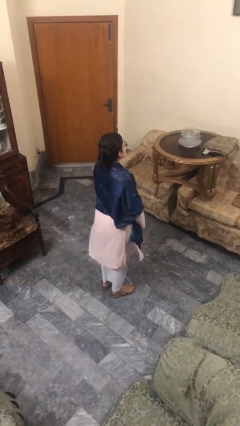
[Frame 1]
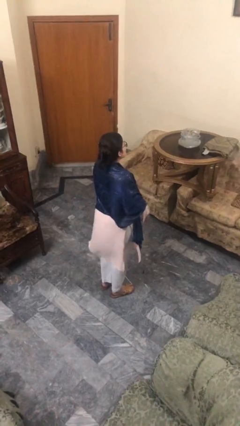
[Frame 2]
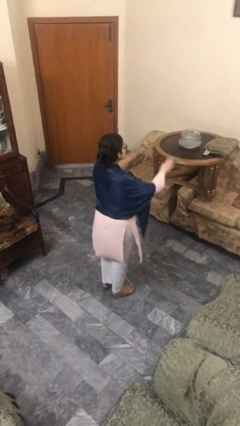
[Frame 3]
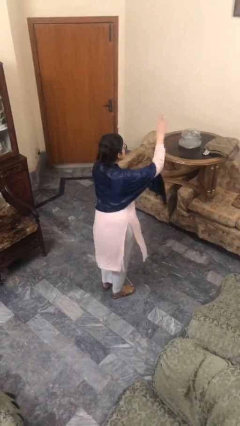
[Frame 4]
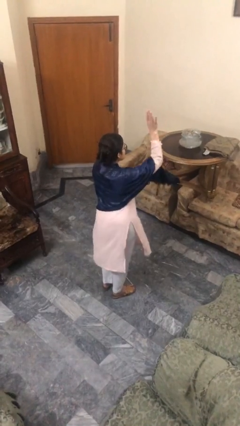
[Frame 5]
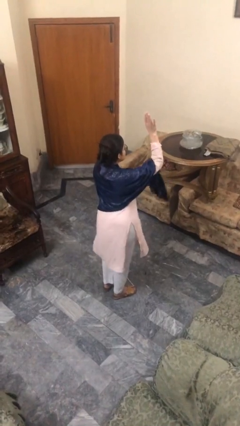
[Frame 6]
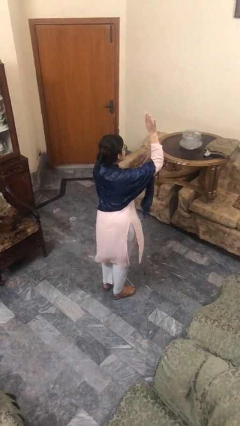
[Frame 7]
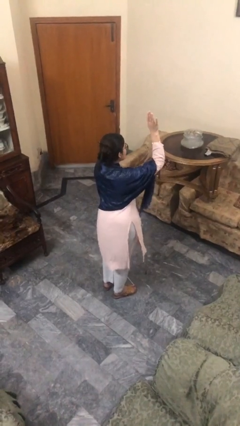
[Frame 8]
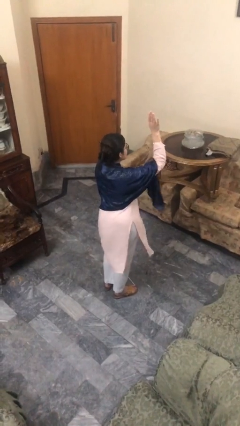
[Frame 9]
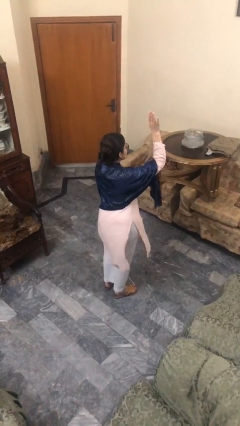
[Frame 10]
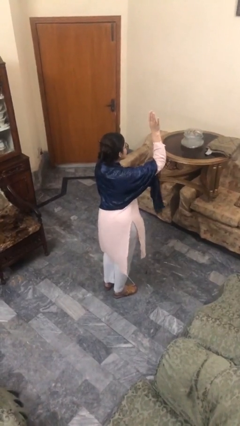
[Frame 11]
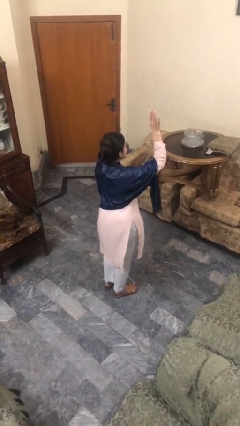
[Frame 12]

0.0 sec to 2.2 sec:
person gestures raise hand

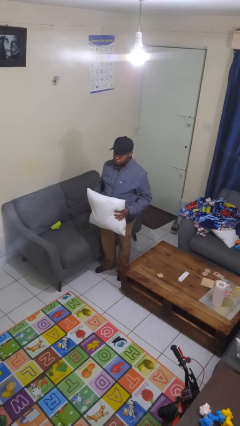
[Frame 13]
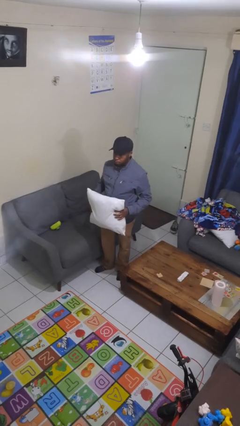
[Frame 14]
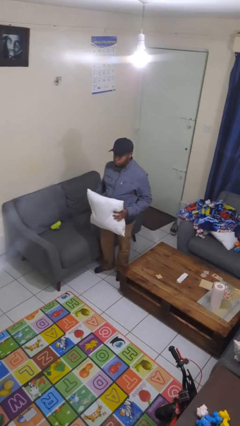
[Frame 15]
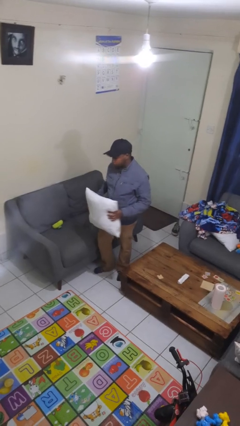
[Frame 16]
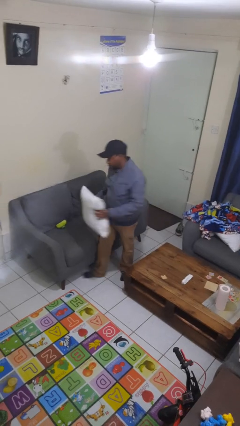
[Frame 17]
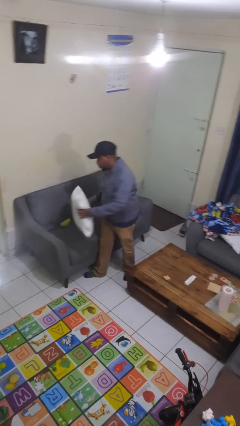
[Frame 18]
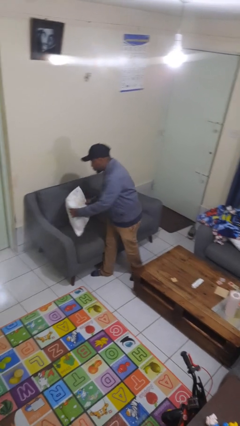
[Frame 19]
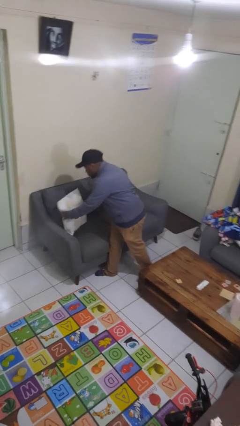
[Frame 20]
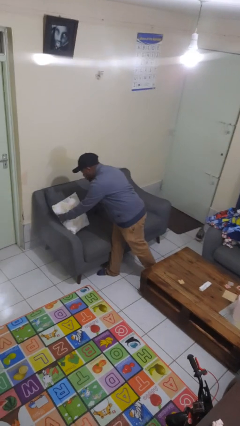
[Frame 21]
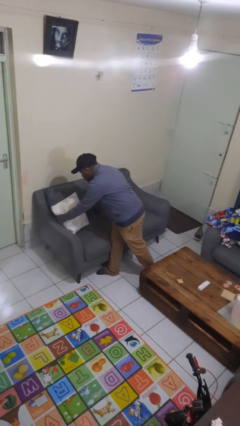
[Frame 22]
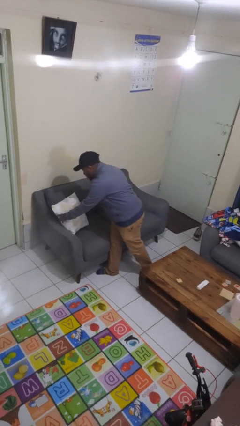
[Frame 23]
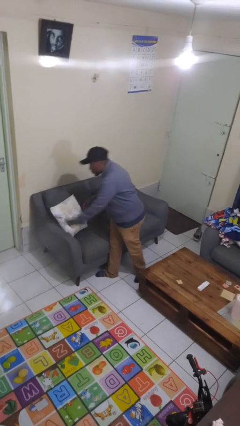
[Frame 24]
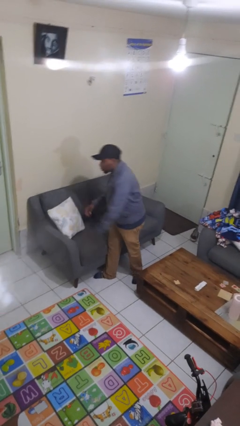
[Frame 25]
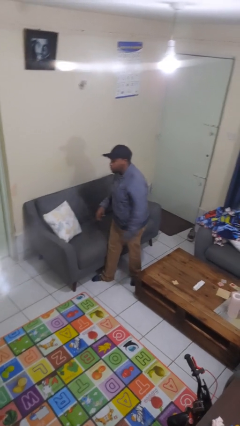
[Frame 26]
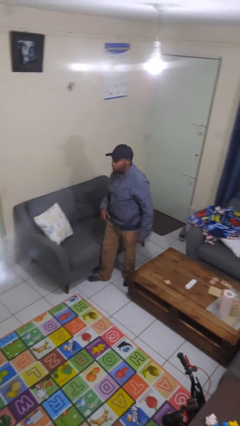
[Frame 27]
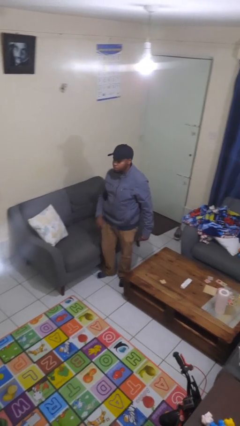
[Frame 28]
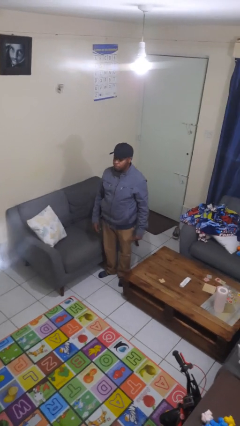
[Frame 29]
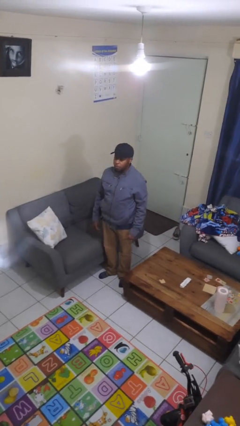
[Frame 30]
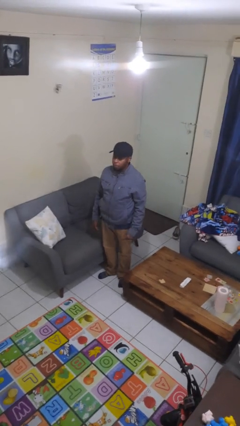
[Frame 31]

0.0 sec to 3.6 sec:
person puts down object on couch

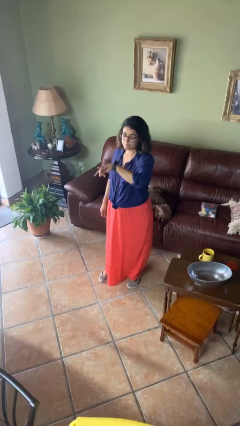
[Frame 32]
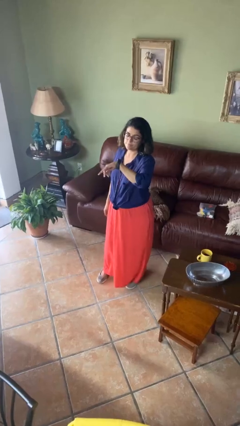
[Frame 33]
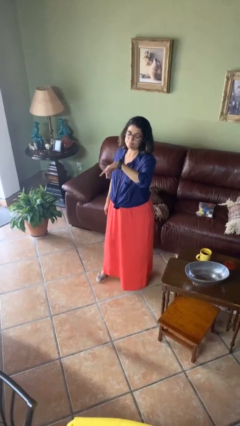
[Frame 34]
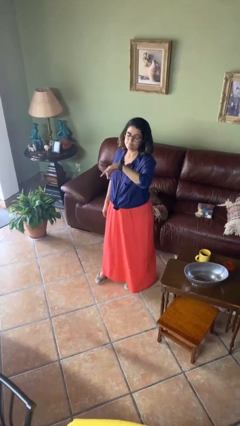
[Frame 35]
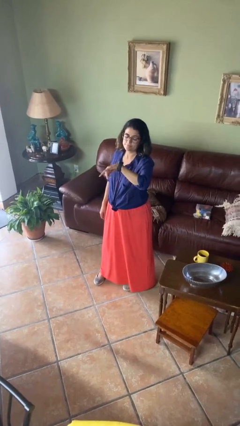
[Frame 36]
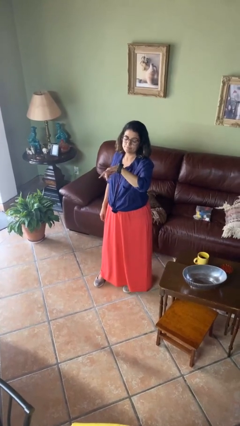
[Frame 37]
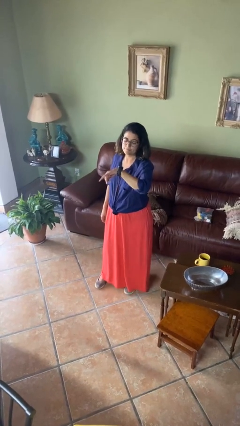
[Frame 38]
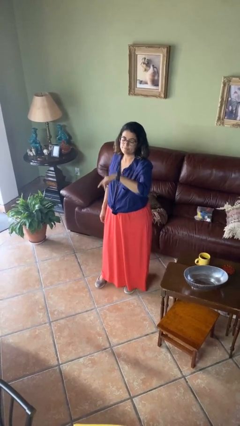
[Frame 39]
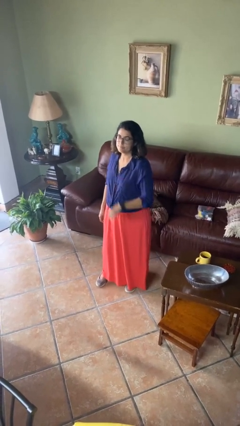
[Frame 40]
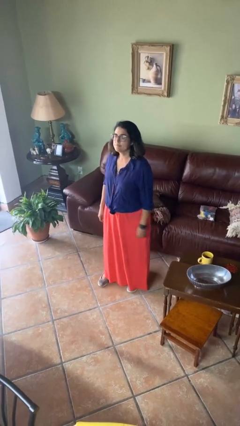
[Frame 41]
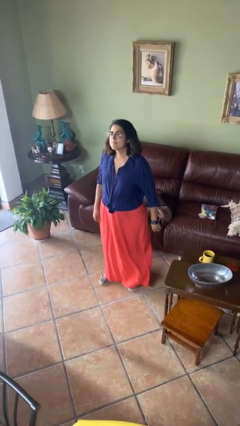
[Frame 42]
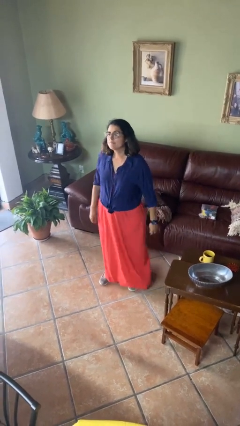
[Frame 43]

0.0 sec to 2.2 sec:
person looks at wristwatch

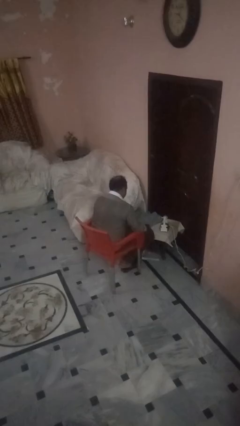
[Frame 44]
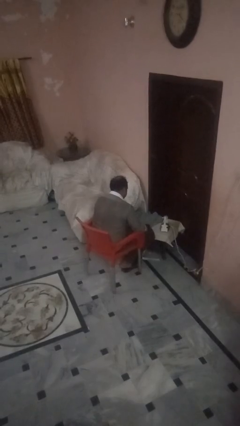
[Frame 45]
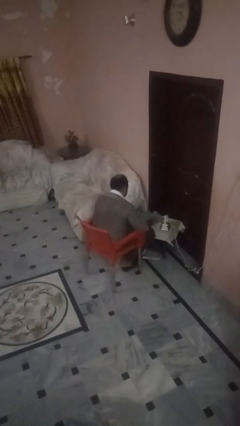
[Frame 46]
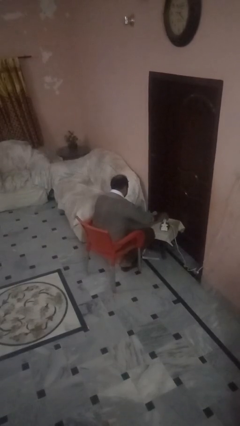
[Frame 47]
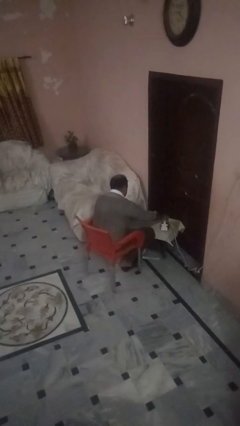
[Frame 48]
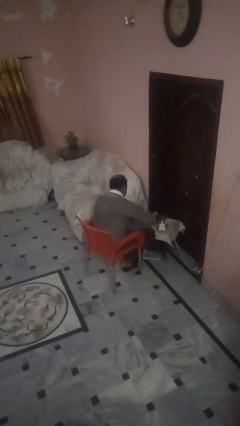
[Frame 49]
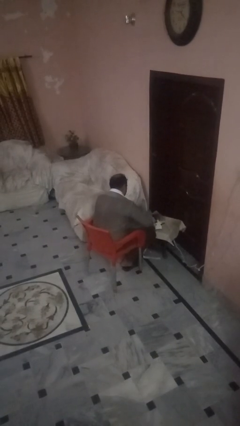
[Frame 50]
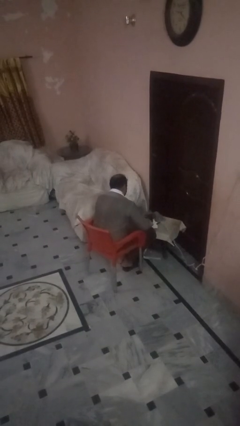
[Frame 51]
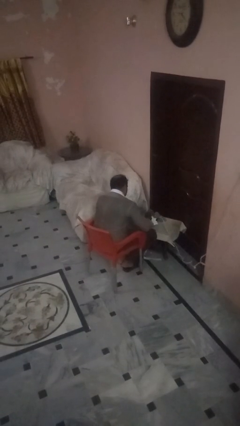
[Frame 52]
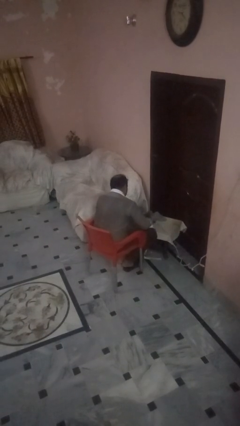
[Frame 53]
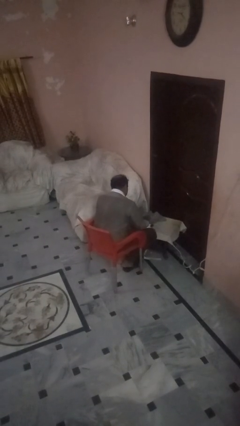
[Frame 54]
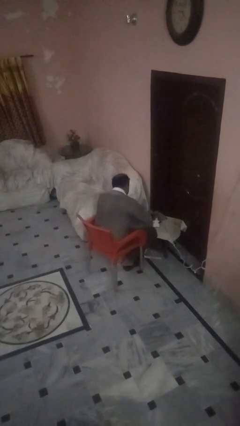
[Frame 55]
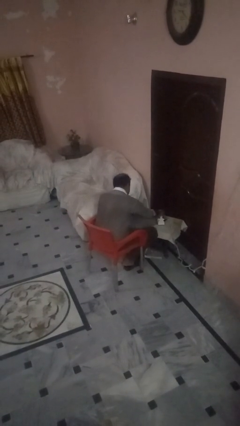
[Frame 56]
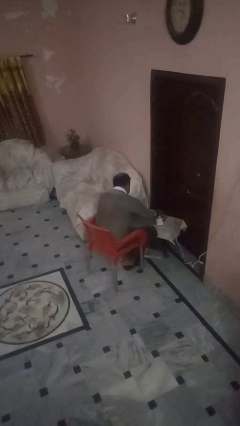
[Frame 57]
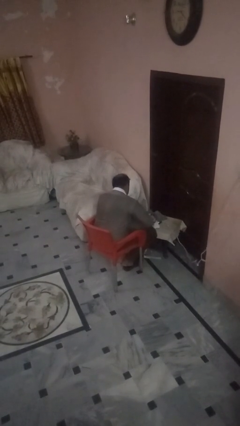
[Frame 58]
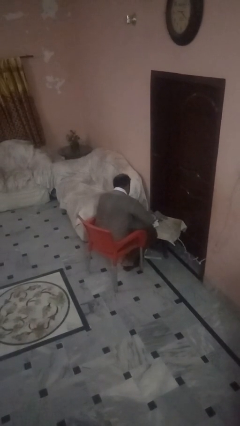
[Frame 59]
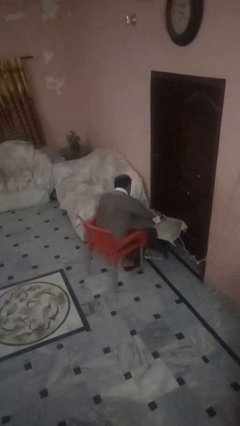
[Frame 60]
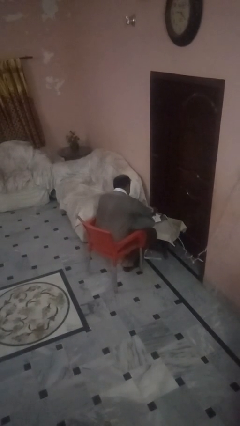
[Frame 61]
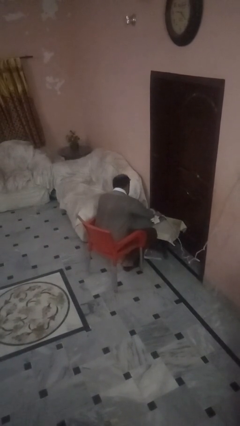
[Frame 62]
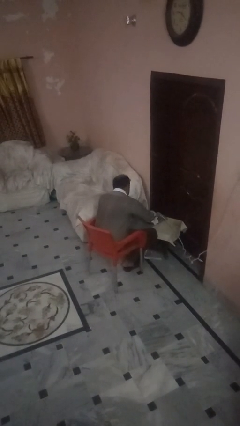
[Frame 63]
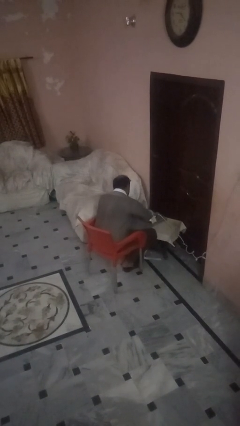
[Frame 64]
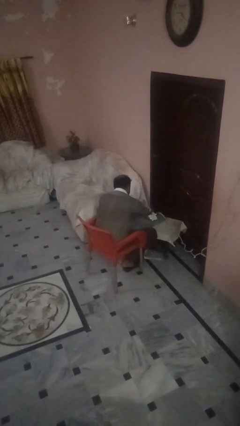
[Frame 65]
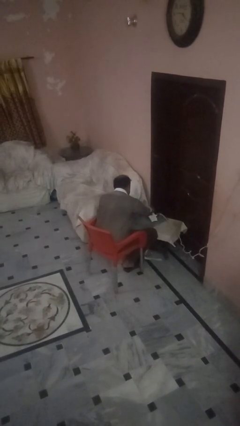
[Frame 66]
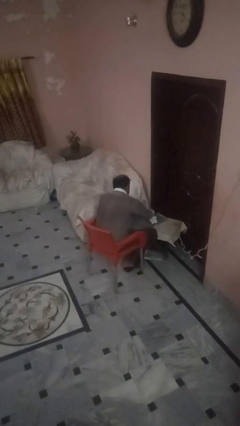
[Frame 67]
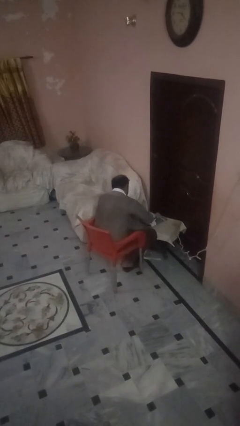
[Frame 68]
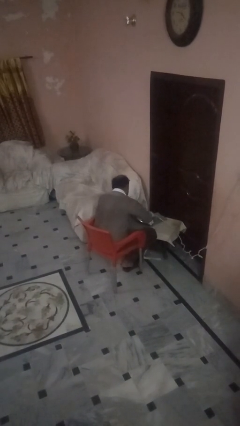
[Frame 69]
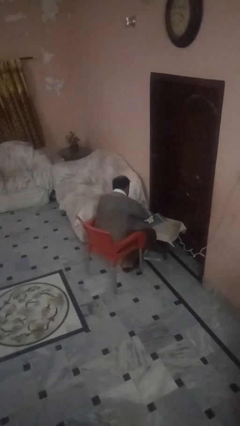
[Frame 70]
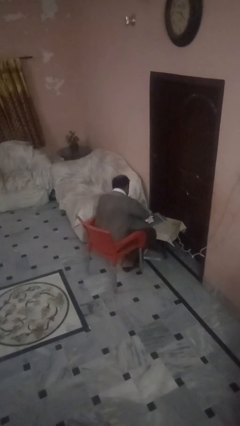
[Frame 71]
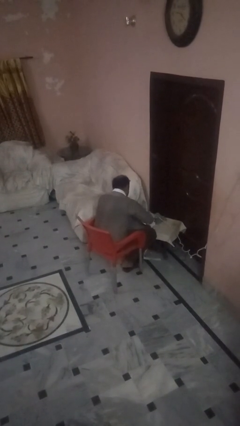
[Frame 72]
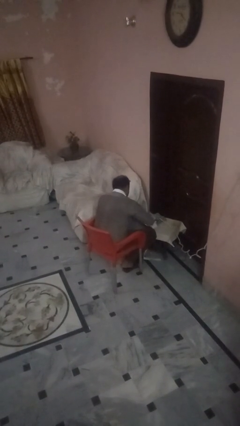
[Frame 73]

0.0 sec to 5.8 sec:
person irons clothes

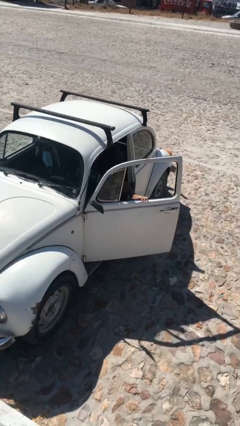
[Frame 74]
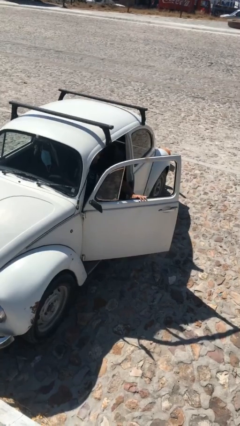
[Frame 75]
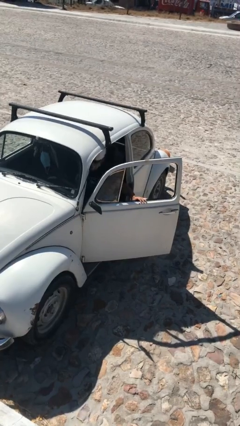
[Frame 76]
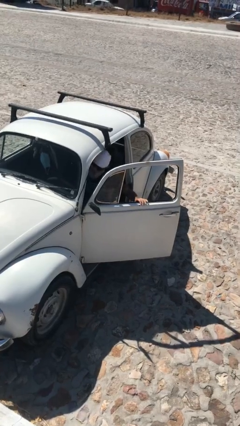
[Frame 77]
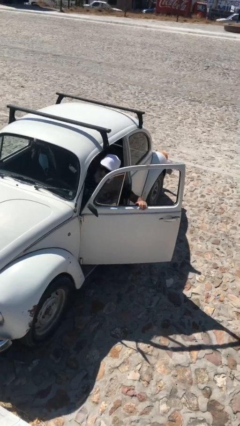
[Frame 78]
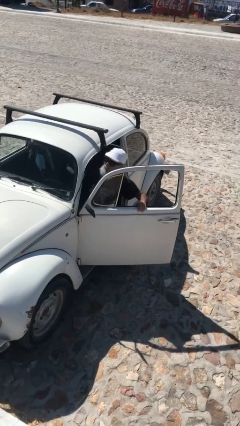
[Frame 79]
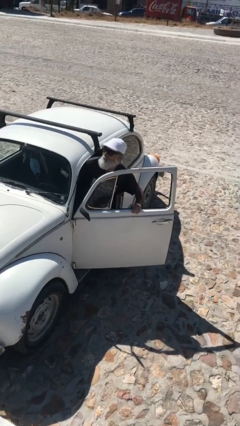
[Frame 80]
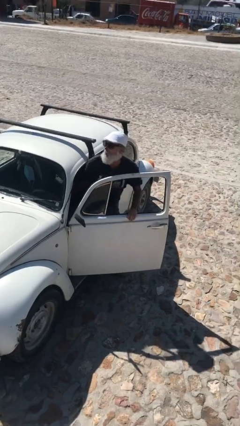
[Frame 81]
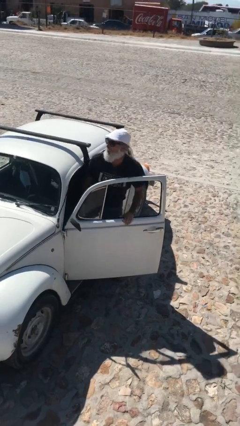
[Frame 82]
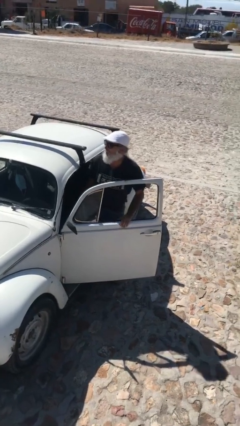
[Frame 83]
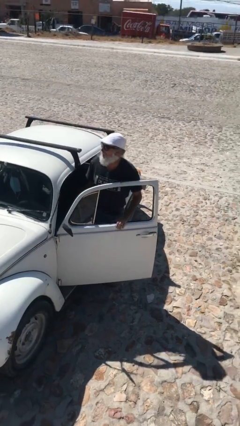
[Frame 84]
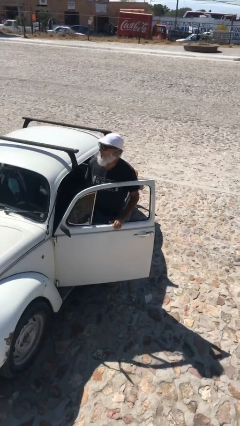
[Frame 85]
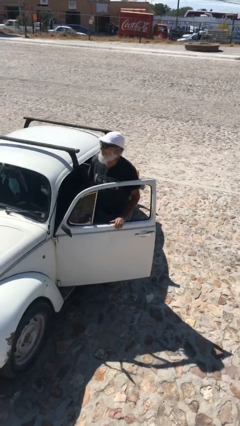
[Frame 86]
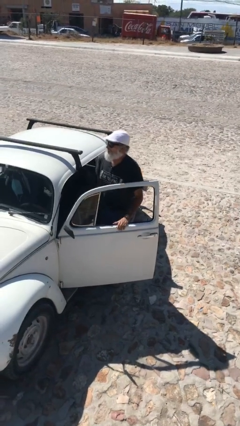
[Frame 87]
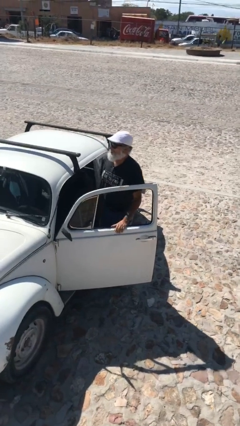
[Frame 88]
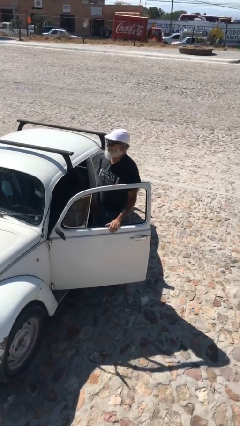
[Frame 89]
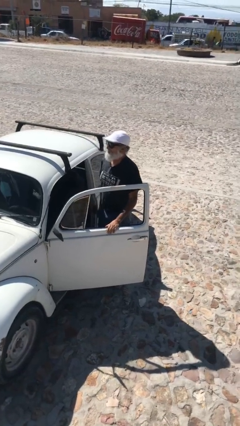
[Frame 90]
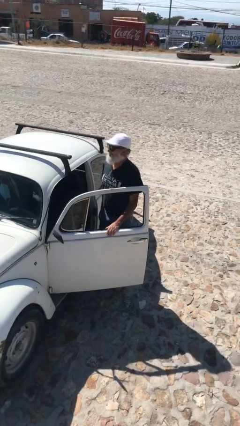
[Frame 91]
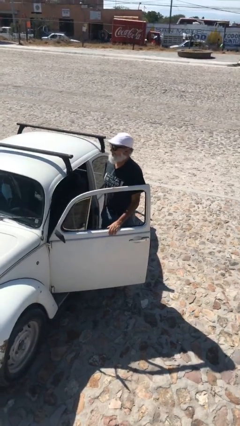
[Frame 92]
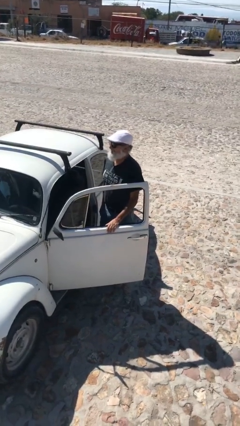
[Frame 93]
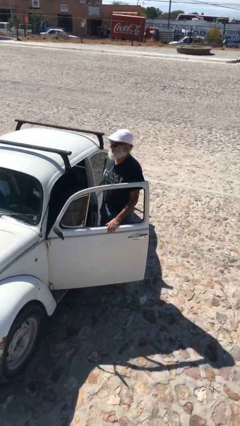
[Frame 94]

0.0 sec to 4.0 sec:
person exits car
